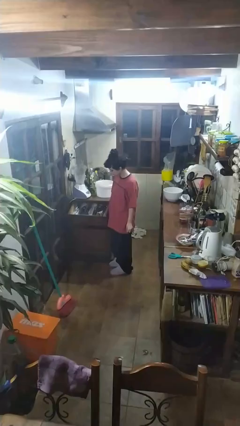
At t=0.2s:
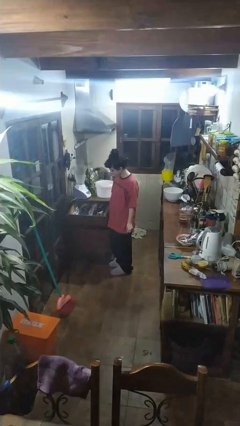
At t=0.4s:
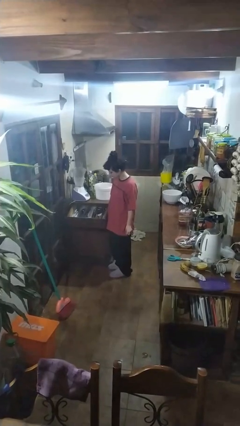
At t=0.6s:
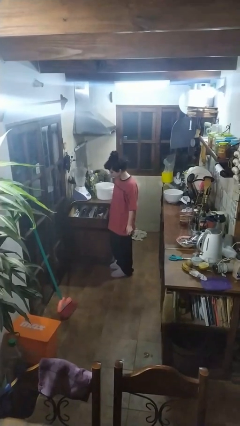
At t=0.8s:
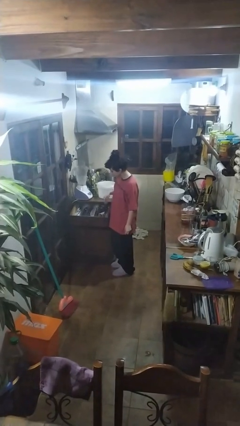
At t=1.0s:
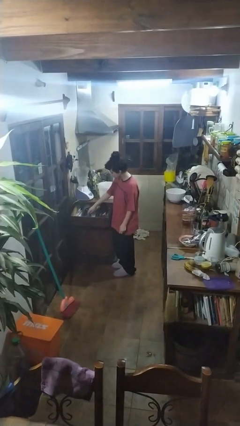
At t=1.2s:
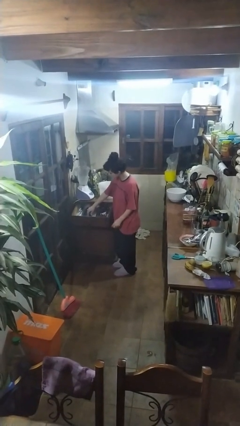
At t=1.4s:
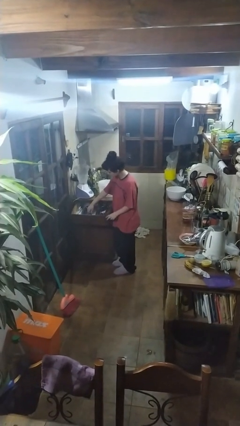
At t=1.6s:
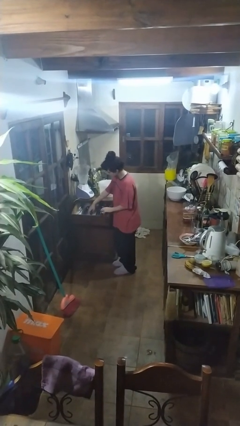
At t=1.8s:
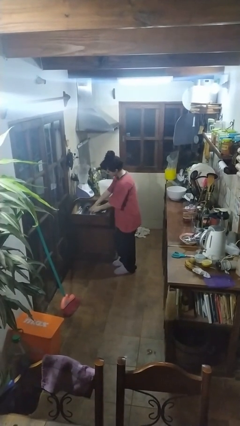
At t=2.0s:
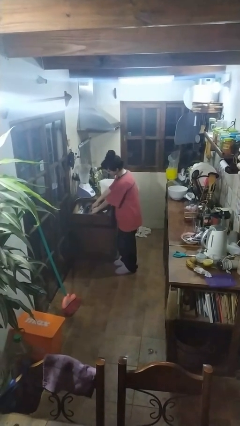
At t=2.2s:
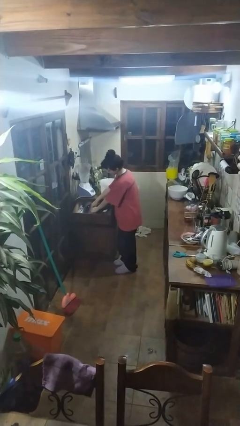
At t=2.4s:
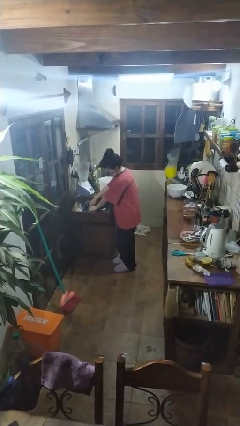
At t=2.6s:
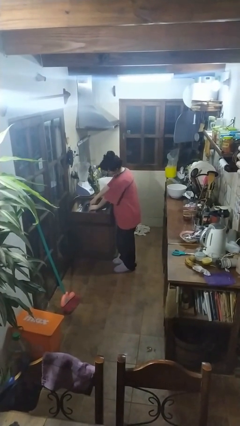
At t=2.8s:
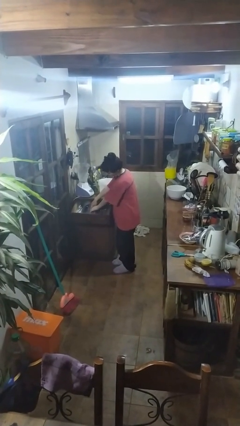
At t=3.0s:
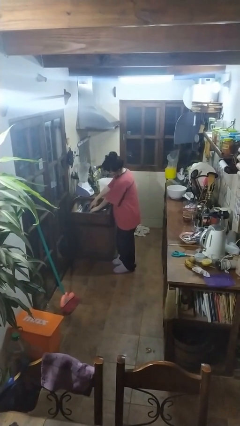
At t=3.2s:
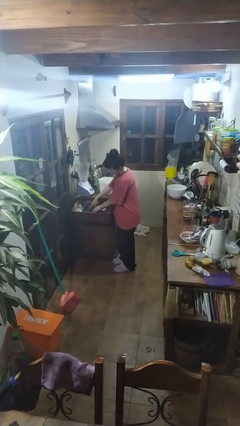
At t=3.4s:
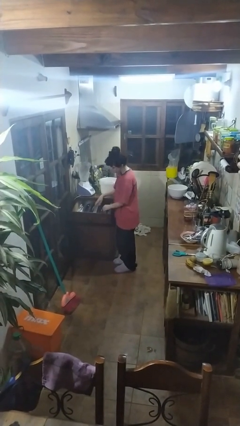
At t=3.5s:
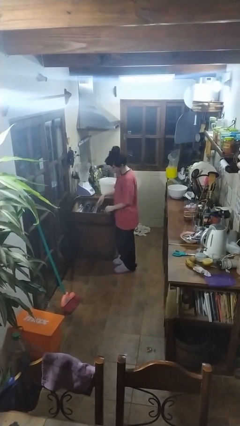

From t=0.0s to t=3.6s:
person searches in kitchen drawer

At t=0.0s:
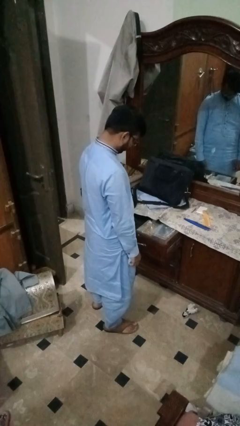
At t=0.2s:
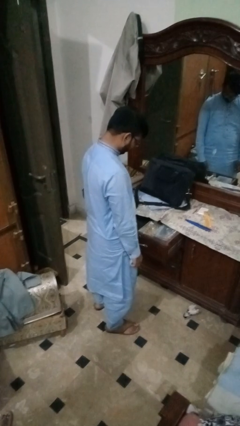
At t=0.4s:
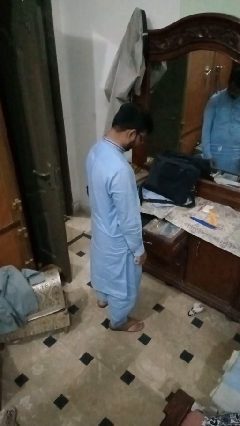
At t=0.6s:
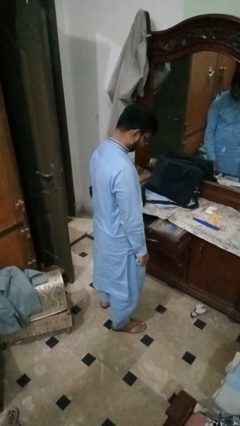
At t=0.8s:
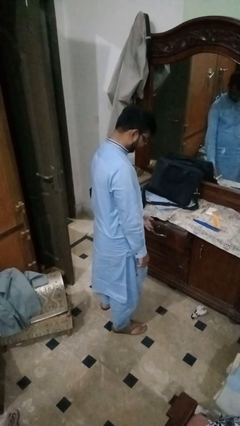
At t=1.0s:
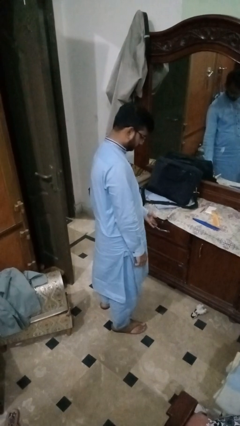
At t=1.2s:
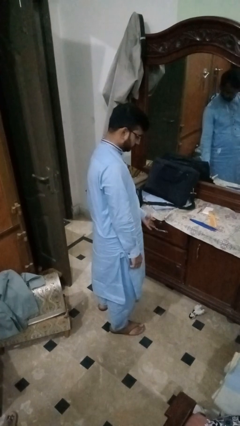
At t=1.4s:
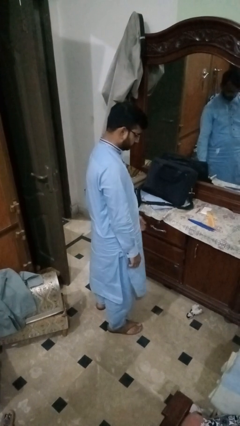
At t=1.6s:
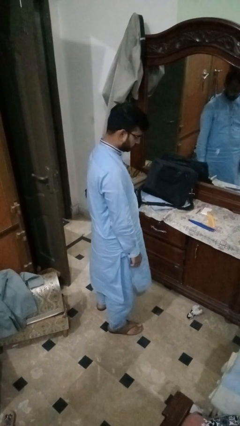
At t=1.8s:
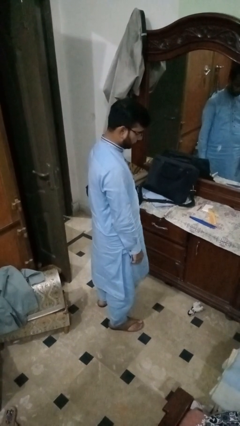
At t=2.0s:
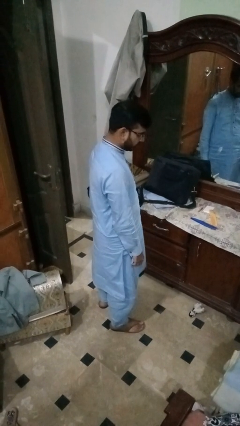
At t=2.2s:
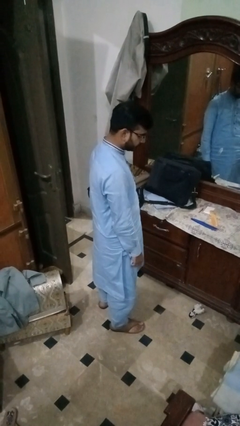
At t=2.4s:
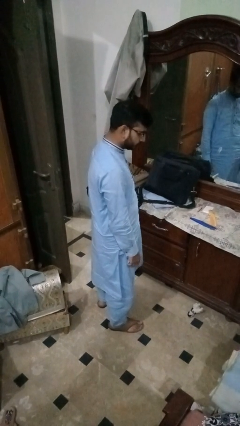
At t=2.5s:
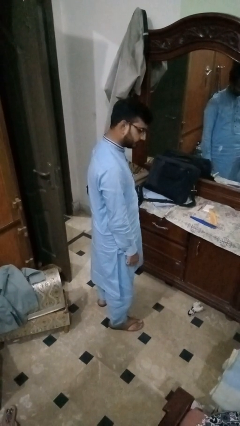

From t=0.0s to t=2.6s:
person closes dresser drawer

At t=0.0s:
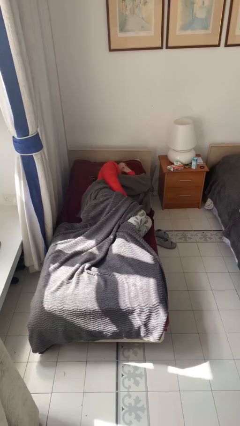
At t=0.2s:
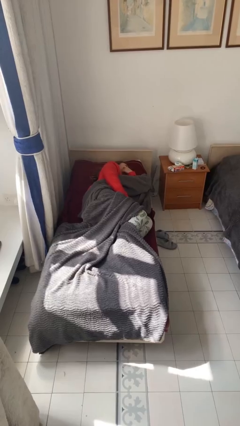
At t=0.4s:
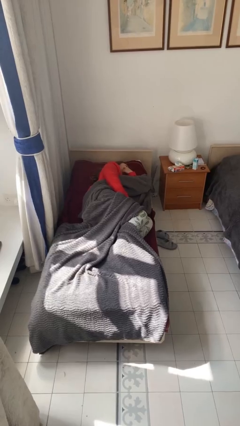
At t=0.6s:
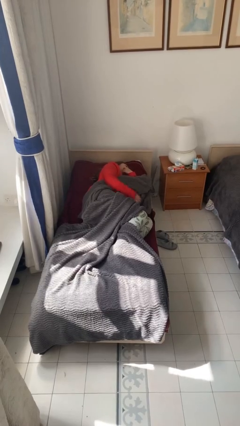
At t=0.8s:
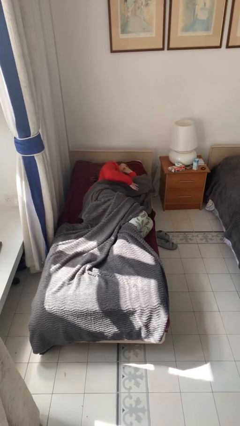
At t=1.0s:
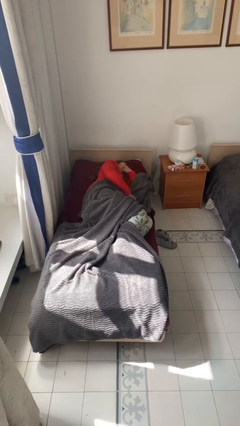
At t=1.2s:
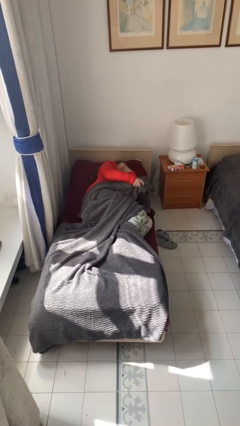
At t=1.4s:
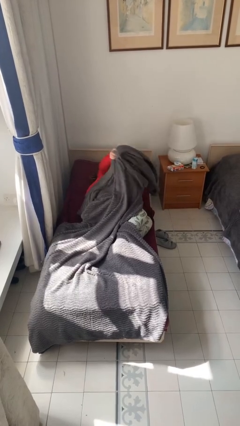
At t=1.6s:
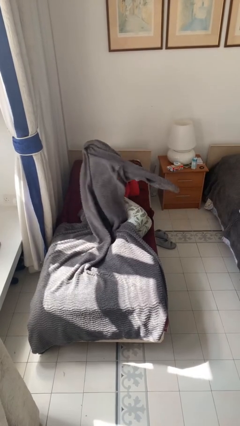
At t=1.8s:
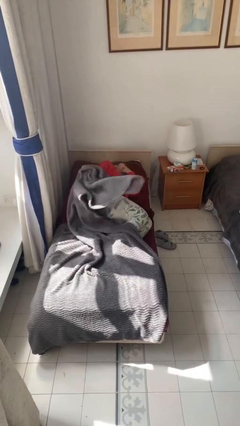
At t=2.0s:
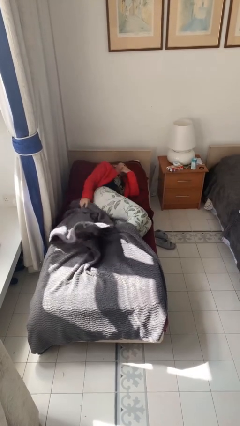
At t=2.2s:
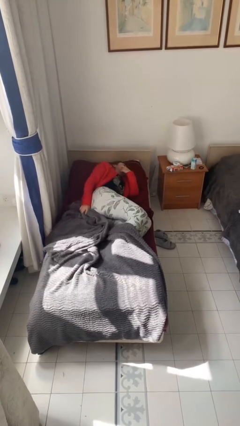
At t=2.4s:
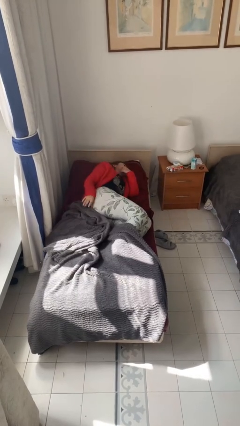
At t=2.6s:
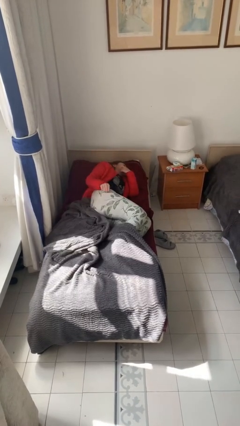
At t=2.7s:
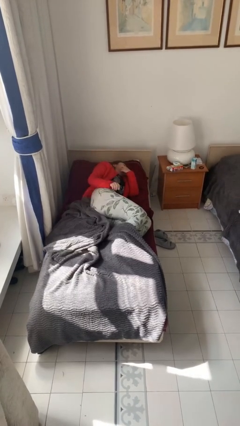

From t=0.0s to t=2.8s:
person uncovers with bedsheets

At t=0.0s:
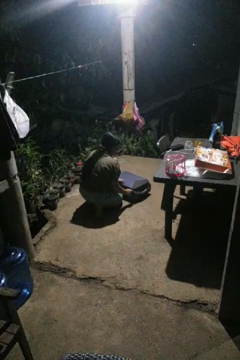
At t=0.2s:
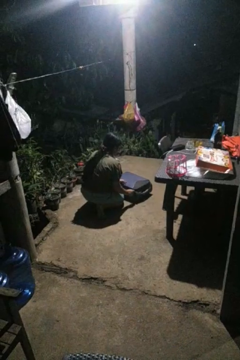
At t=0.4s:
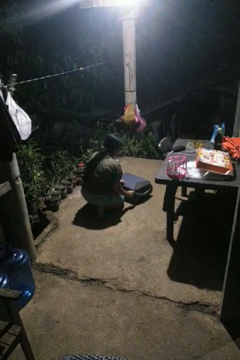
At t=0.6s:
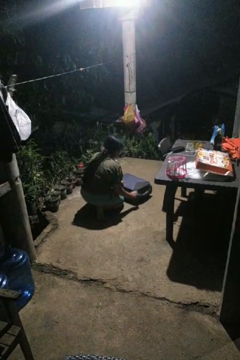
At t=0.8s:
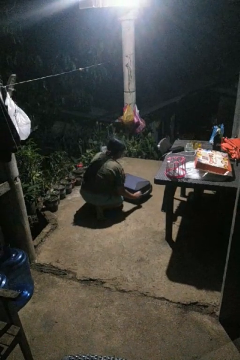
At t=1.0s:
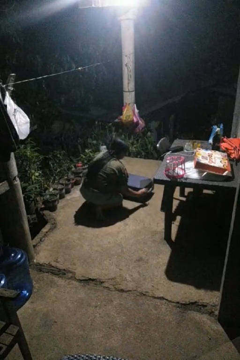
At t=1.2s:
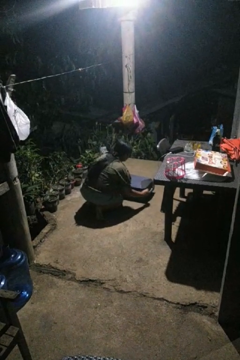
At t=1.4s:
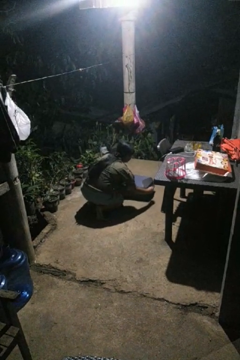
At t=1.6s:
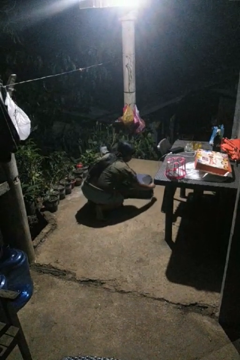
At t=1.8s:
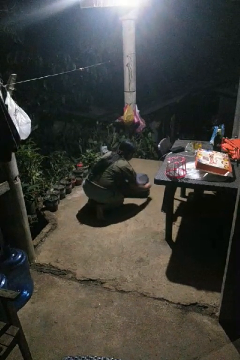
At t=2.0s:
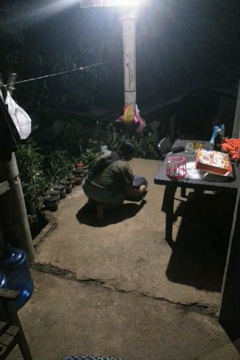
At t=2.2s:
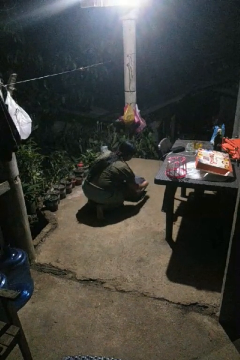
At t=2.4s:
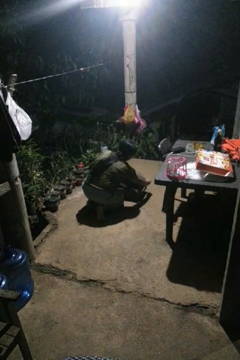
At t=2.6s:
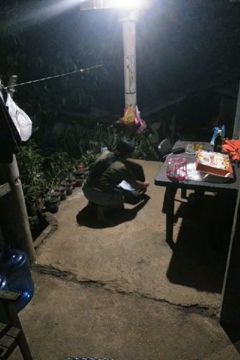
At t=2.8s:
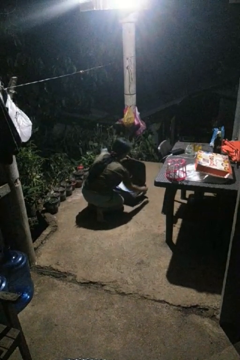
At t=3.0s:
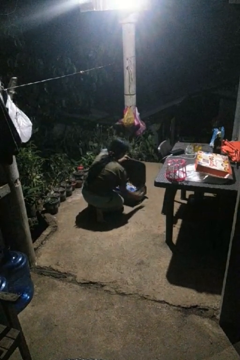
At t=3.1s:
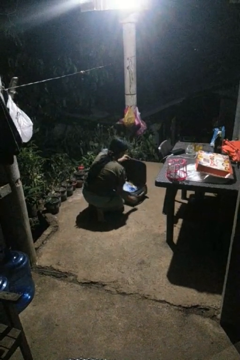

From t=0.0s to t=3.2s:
person opens suitcase

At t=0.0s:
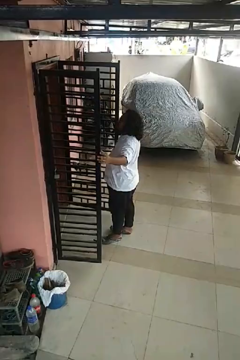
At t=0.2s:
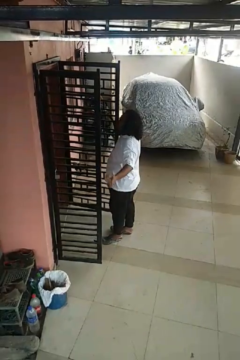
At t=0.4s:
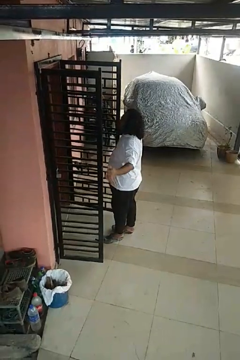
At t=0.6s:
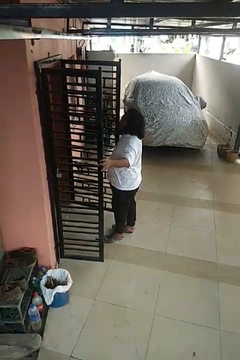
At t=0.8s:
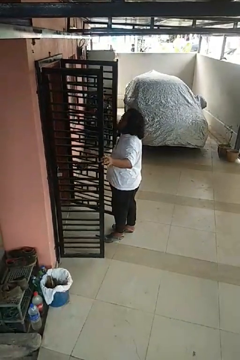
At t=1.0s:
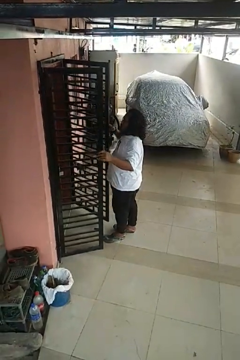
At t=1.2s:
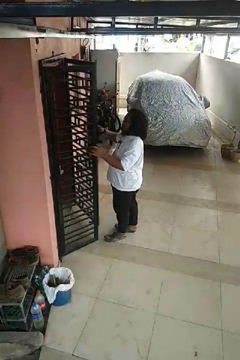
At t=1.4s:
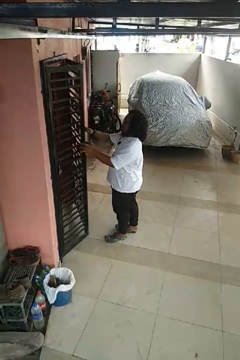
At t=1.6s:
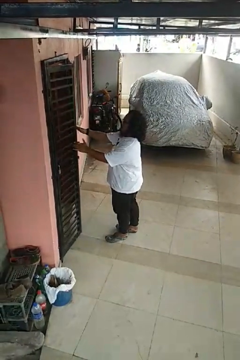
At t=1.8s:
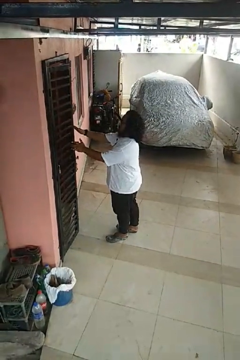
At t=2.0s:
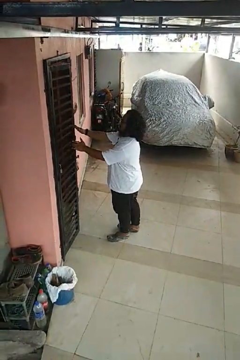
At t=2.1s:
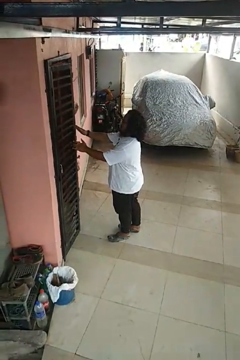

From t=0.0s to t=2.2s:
person closes gate

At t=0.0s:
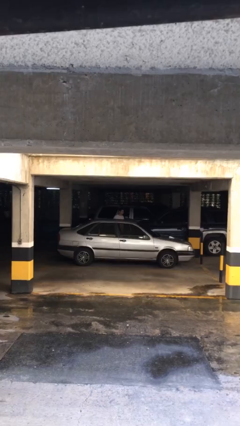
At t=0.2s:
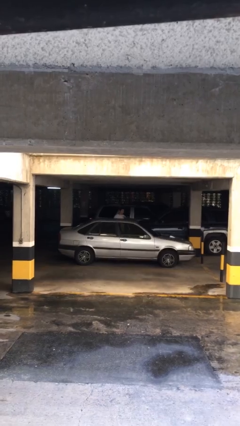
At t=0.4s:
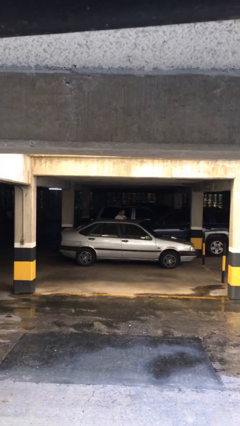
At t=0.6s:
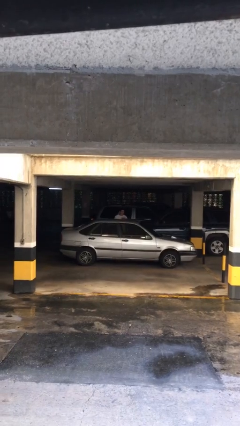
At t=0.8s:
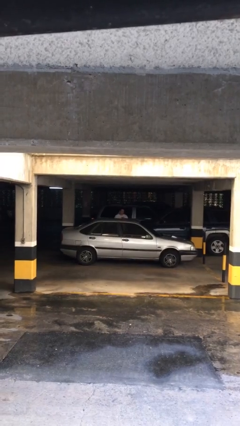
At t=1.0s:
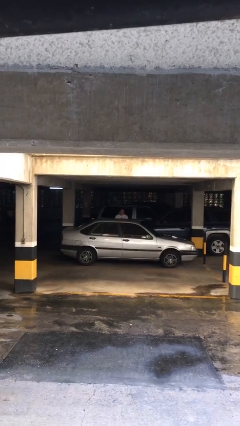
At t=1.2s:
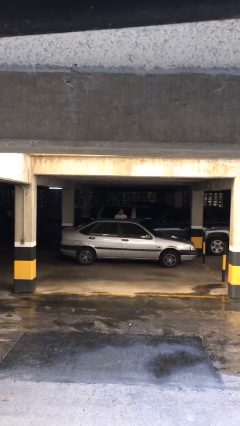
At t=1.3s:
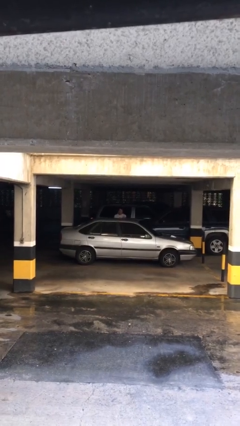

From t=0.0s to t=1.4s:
person closes car door

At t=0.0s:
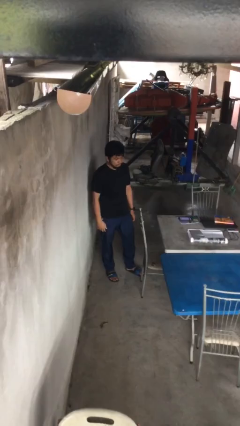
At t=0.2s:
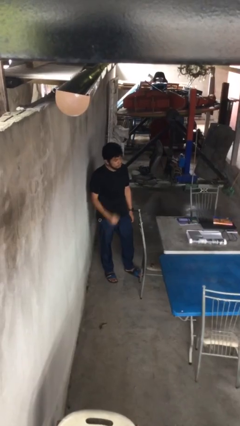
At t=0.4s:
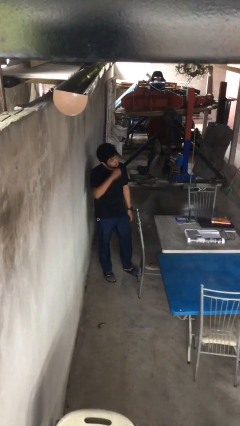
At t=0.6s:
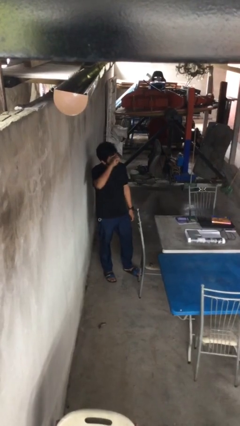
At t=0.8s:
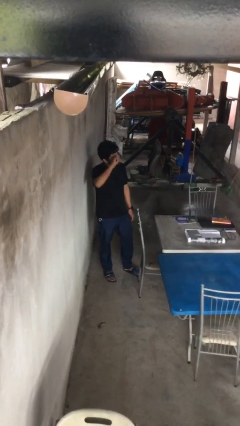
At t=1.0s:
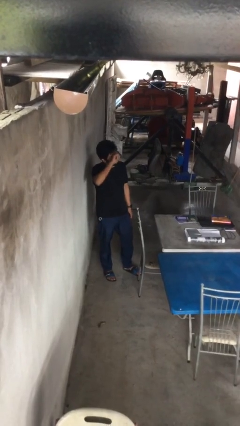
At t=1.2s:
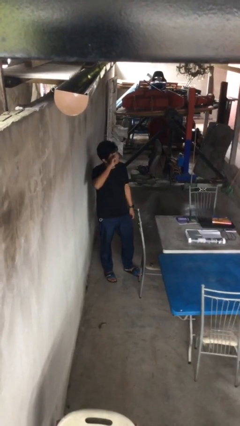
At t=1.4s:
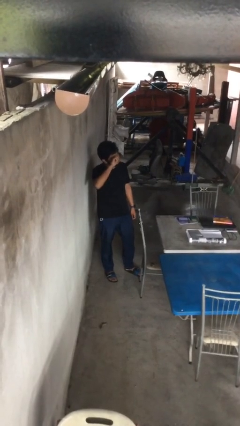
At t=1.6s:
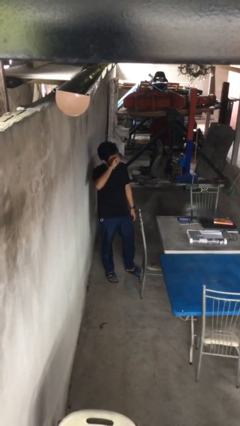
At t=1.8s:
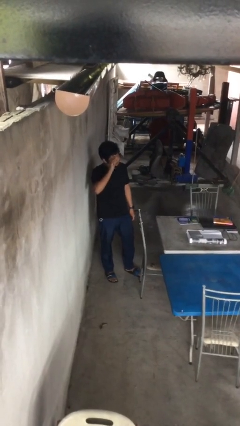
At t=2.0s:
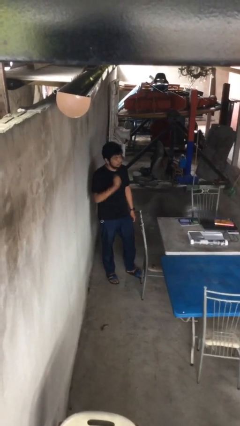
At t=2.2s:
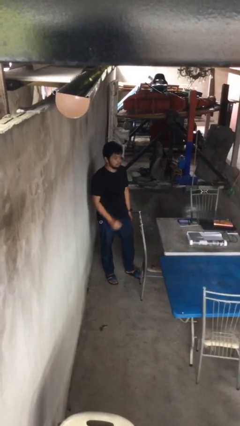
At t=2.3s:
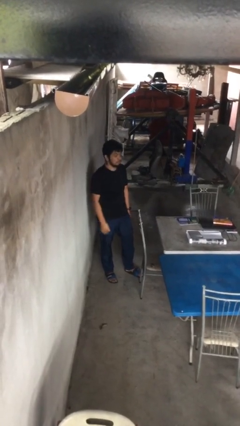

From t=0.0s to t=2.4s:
person scratches face

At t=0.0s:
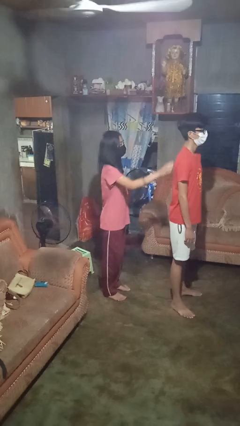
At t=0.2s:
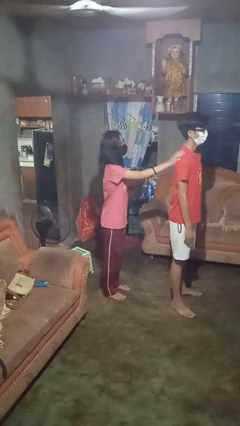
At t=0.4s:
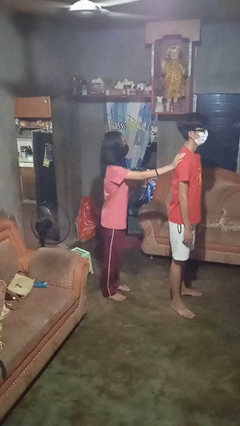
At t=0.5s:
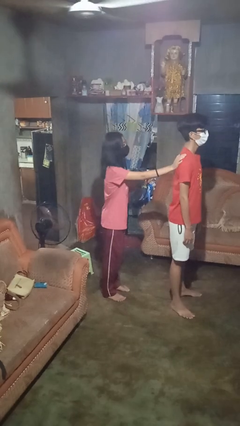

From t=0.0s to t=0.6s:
person touches back of person
